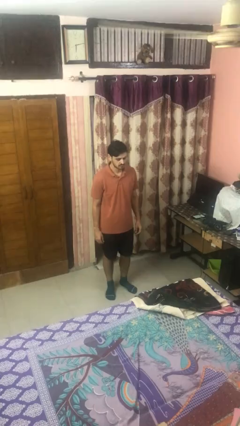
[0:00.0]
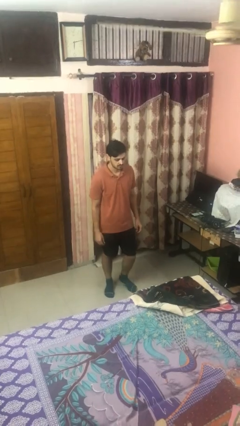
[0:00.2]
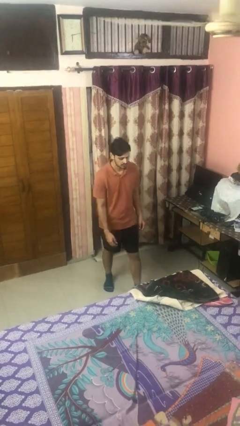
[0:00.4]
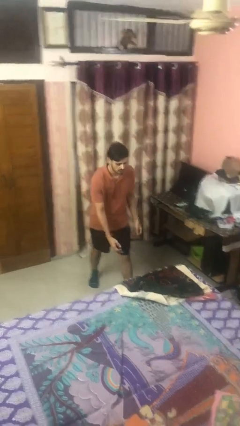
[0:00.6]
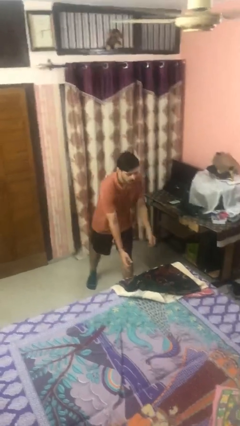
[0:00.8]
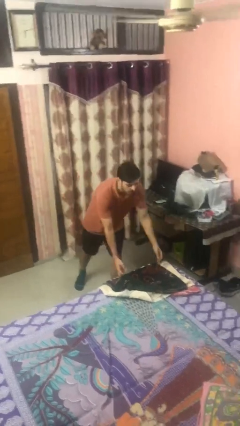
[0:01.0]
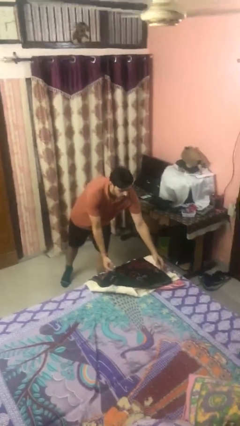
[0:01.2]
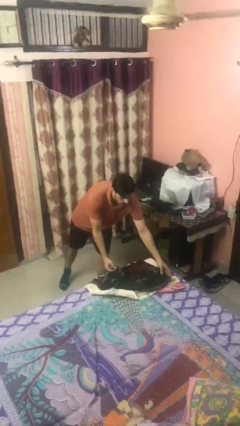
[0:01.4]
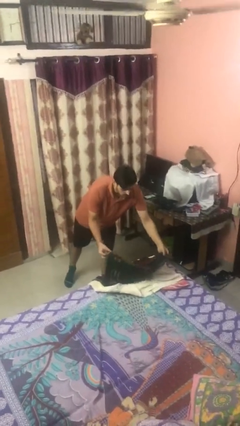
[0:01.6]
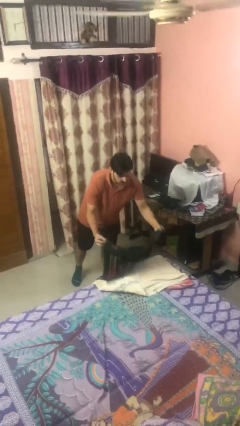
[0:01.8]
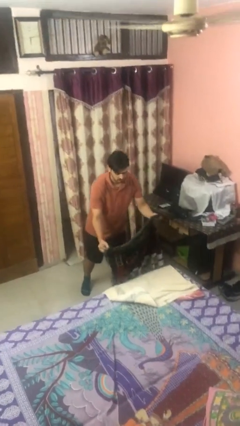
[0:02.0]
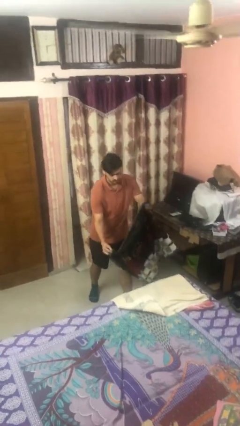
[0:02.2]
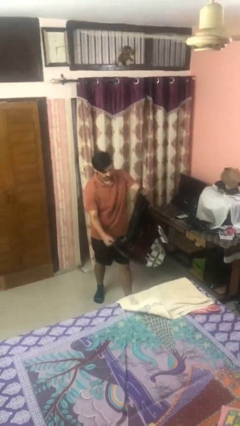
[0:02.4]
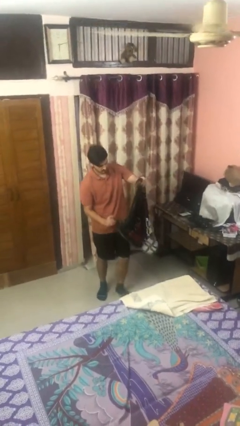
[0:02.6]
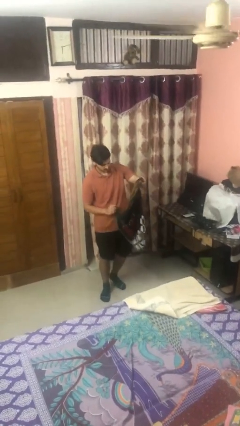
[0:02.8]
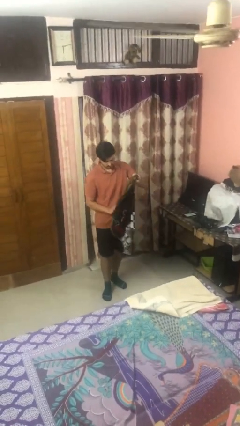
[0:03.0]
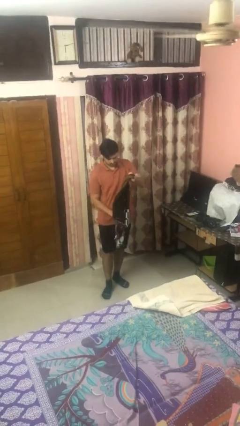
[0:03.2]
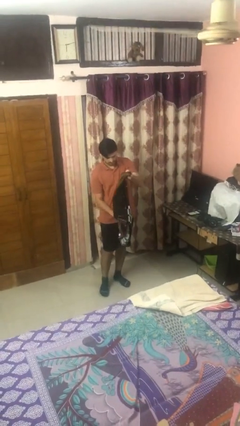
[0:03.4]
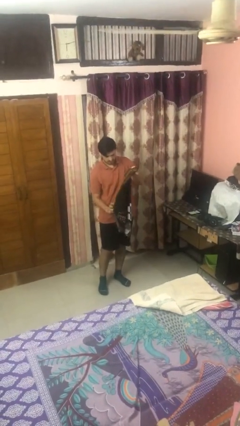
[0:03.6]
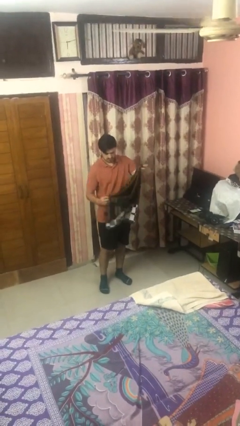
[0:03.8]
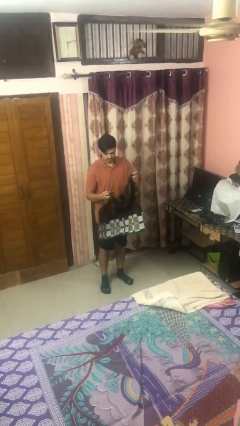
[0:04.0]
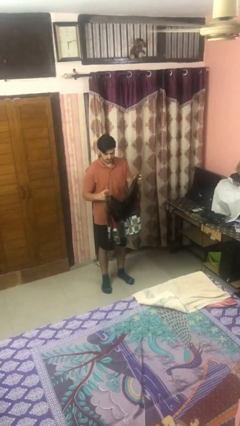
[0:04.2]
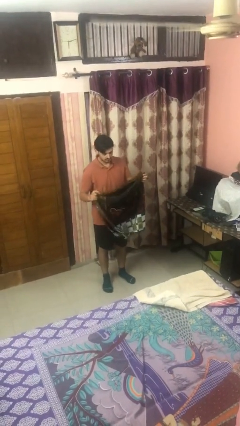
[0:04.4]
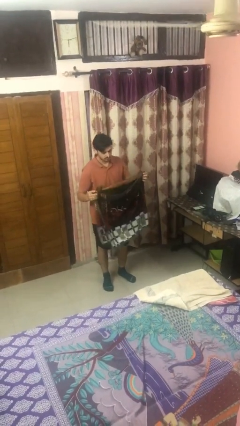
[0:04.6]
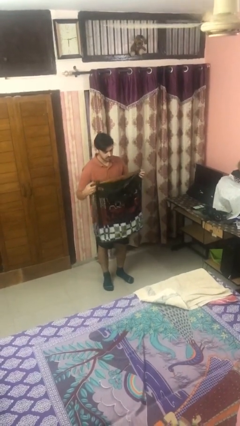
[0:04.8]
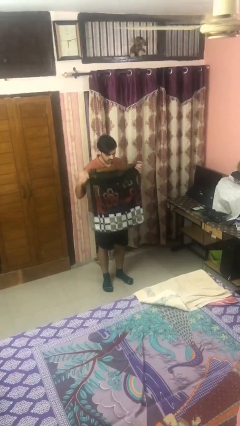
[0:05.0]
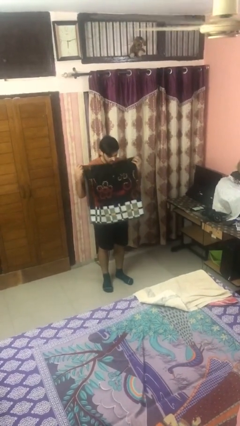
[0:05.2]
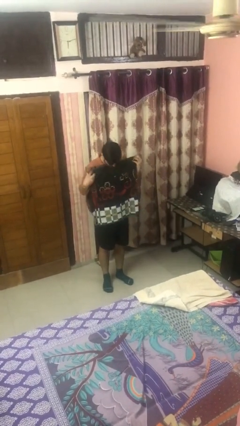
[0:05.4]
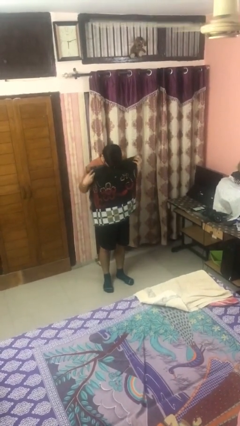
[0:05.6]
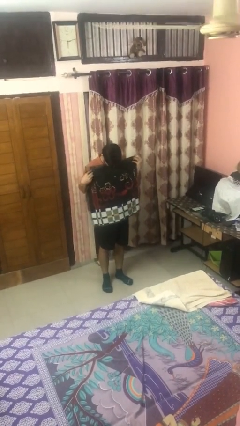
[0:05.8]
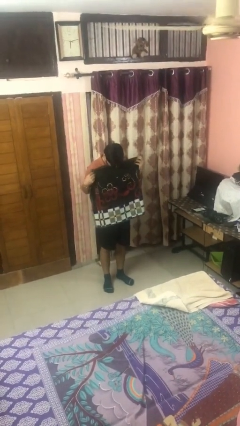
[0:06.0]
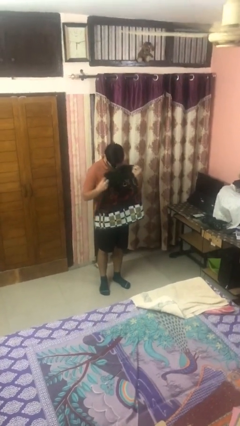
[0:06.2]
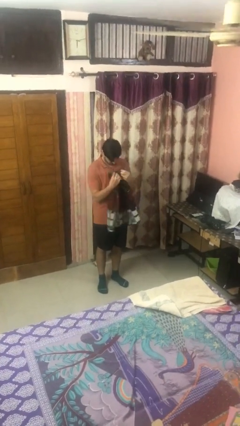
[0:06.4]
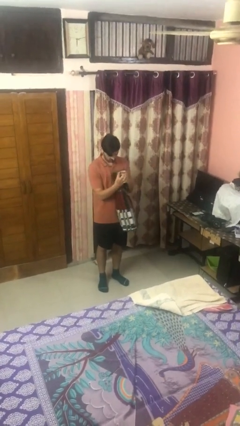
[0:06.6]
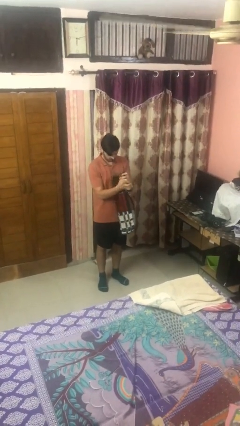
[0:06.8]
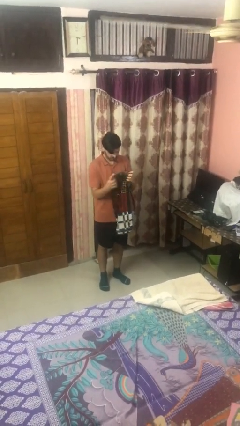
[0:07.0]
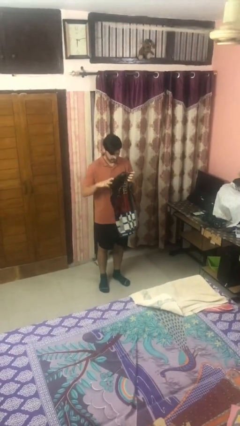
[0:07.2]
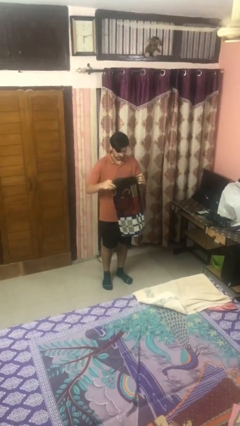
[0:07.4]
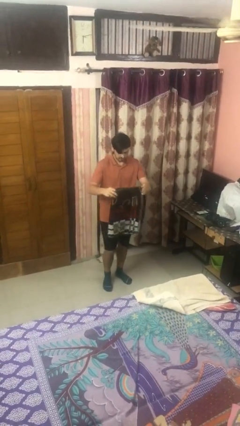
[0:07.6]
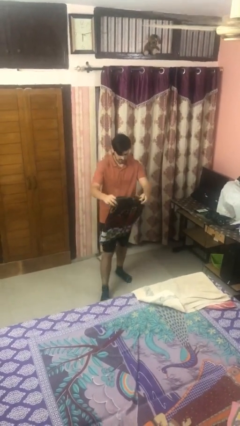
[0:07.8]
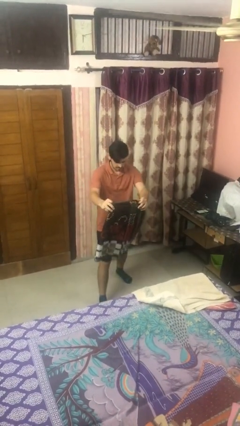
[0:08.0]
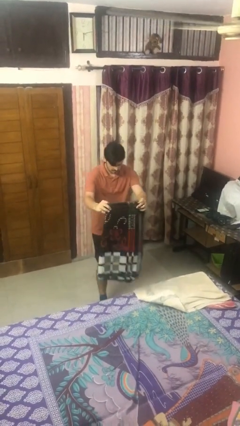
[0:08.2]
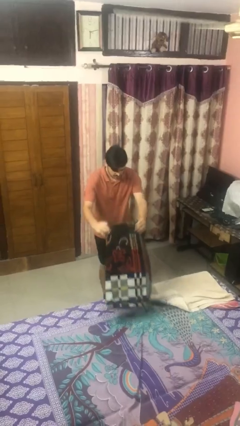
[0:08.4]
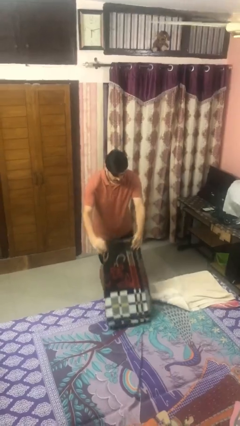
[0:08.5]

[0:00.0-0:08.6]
person folds towel

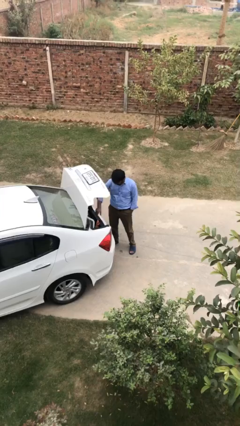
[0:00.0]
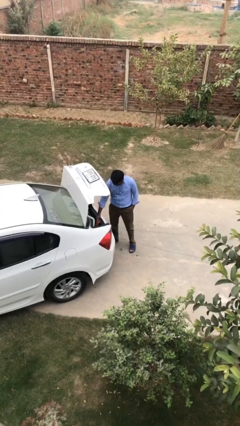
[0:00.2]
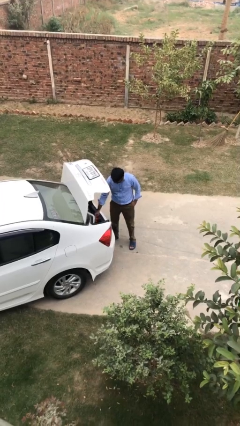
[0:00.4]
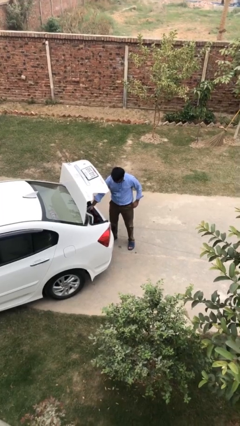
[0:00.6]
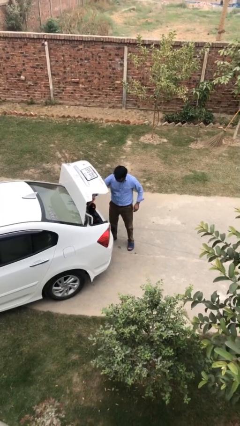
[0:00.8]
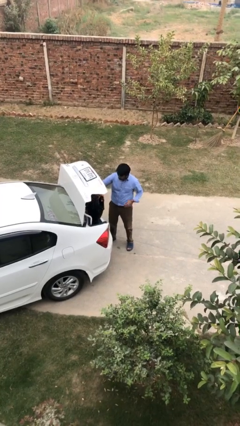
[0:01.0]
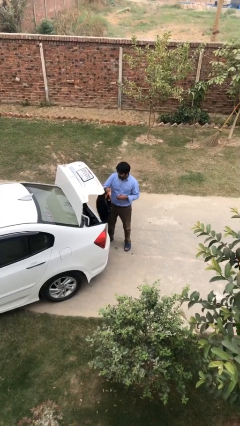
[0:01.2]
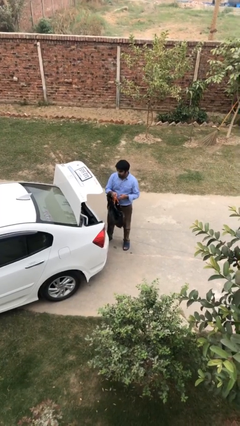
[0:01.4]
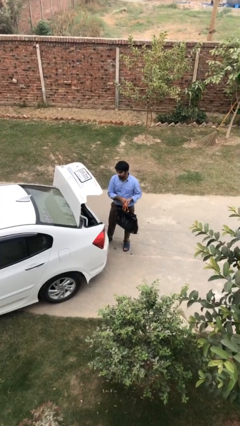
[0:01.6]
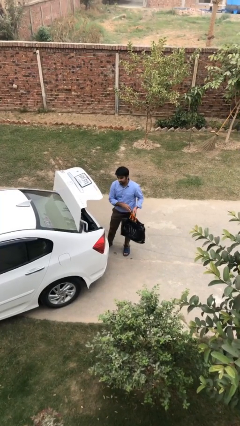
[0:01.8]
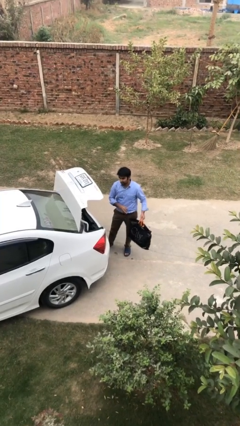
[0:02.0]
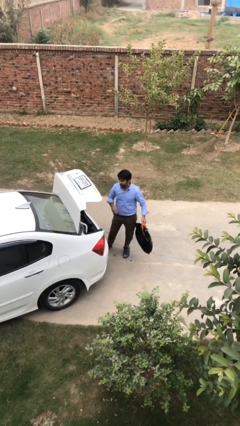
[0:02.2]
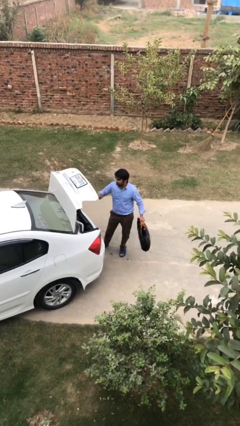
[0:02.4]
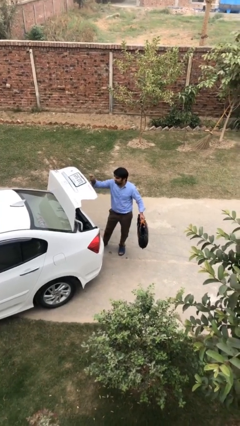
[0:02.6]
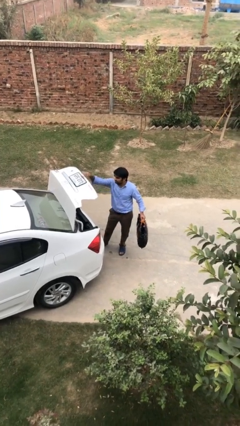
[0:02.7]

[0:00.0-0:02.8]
person unloads car

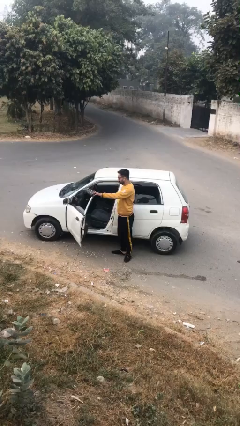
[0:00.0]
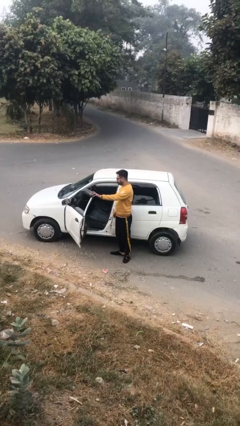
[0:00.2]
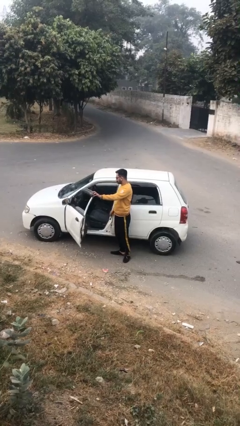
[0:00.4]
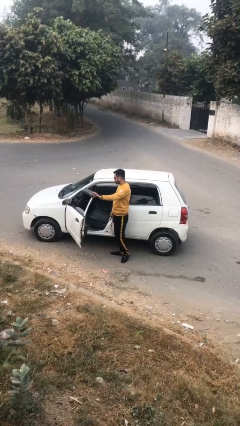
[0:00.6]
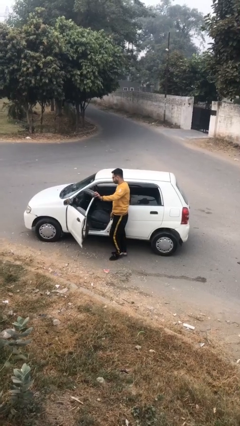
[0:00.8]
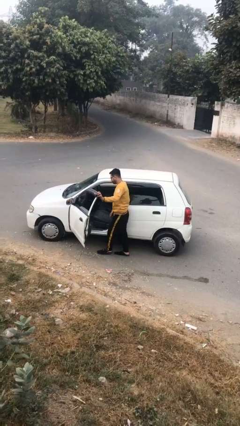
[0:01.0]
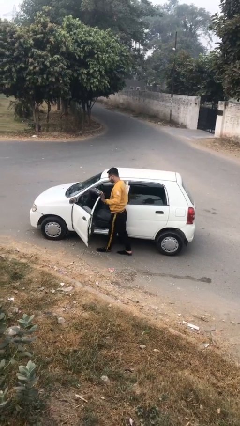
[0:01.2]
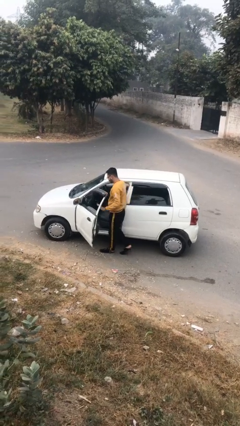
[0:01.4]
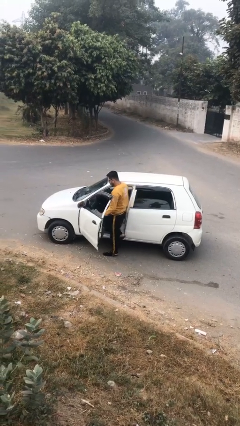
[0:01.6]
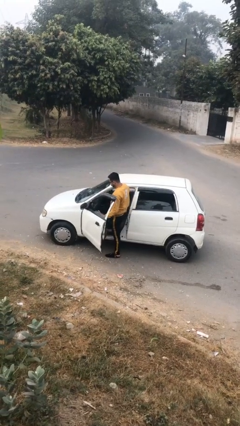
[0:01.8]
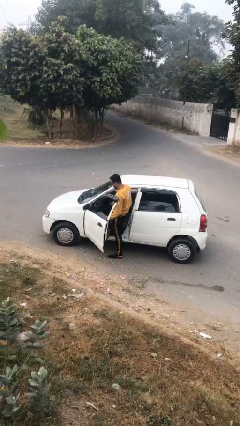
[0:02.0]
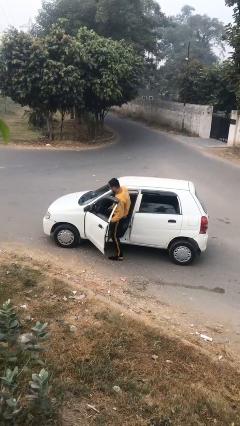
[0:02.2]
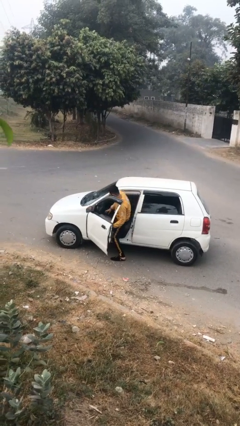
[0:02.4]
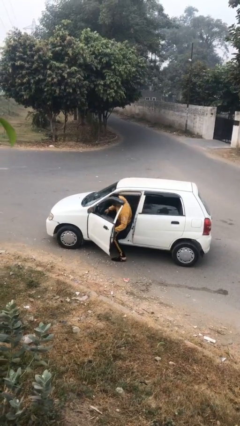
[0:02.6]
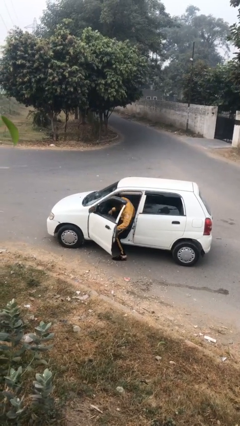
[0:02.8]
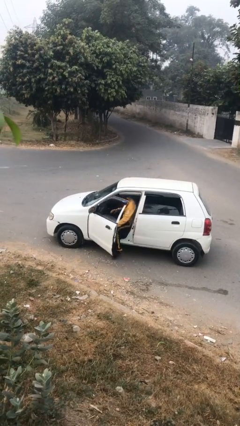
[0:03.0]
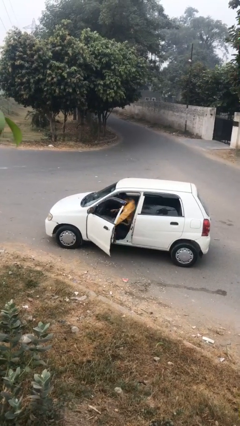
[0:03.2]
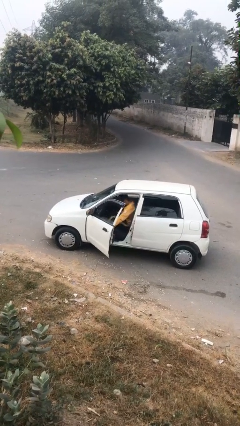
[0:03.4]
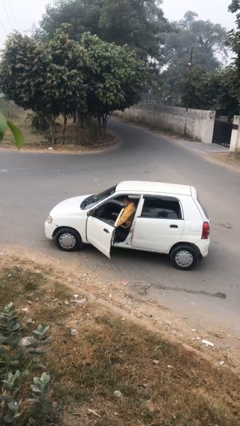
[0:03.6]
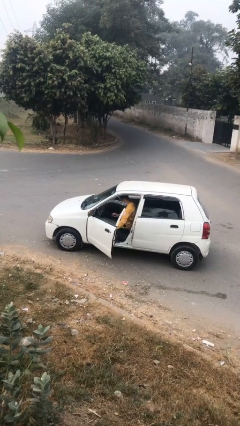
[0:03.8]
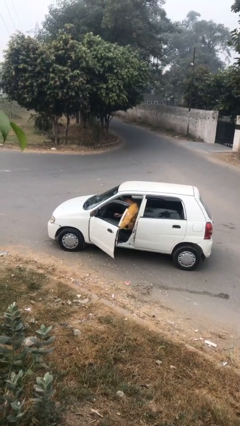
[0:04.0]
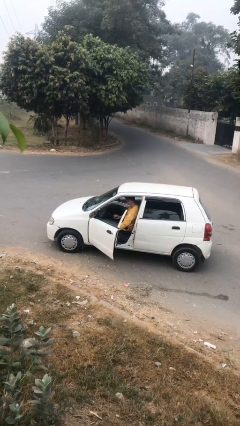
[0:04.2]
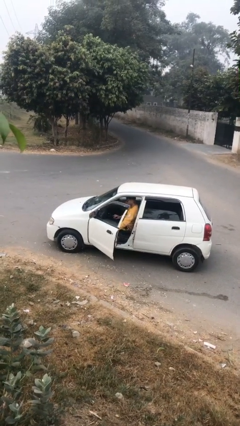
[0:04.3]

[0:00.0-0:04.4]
person enters car

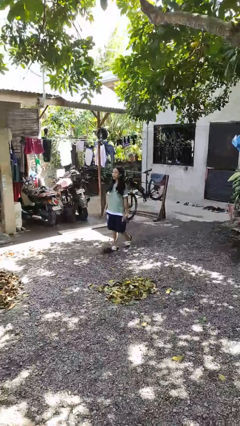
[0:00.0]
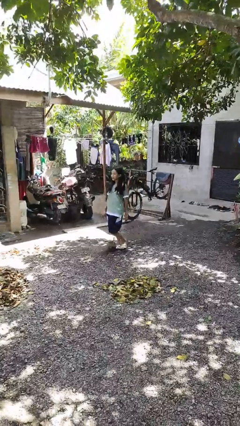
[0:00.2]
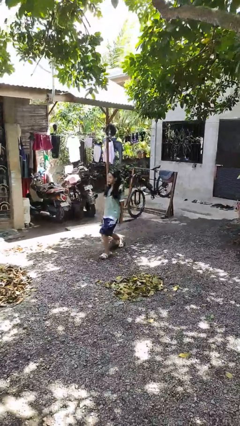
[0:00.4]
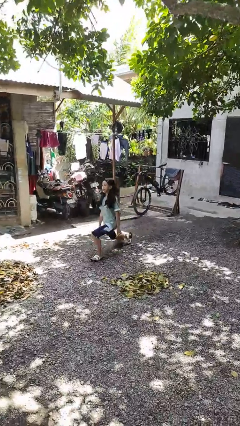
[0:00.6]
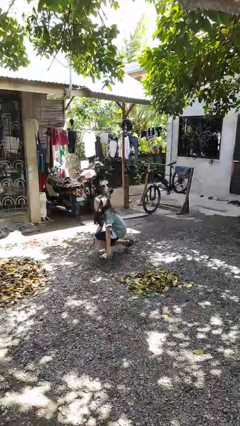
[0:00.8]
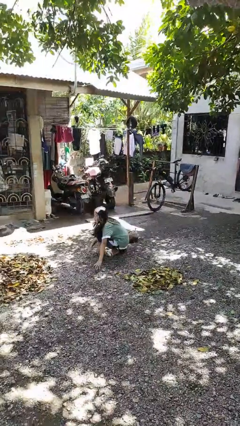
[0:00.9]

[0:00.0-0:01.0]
person trips on object on floor

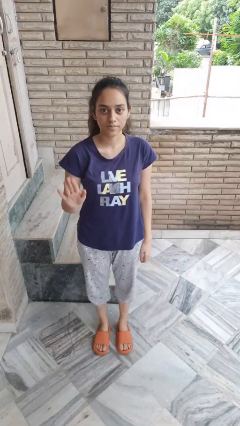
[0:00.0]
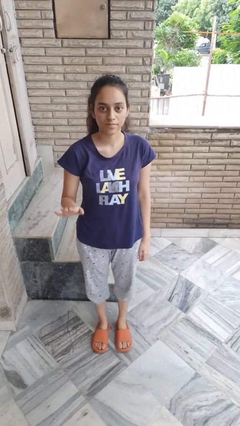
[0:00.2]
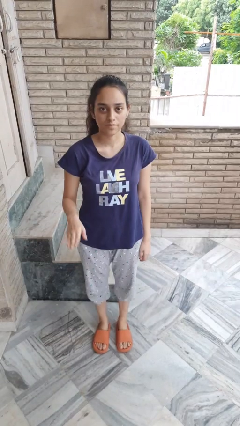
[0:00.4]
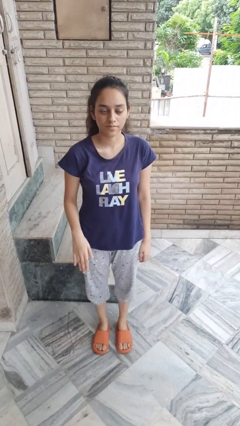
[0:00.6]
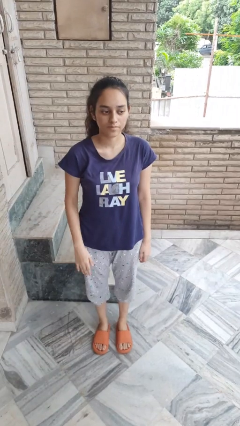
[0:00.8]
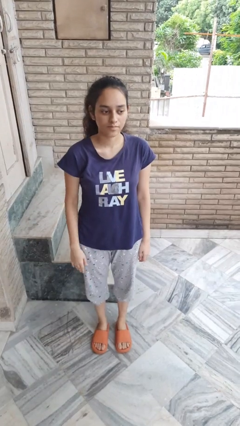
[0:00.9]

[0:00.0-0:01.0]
person gestures stop

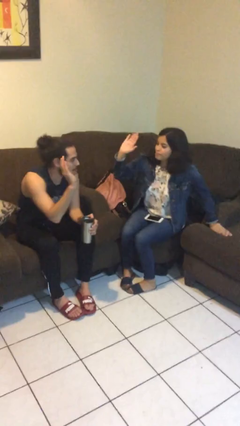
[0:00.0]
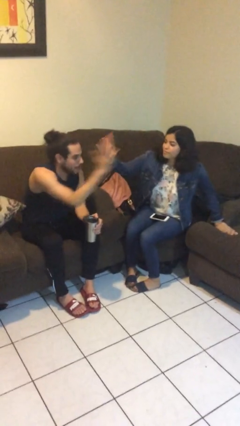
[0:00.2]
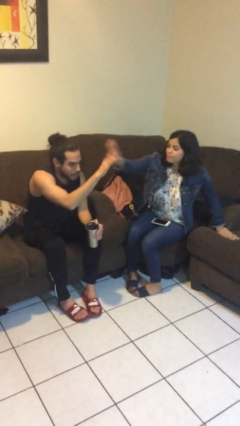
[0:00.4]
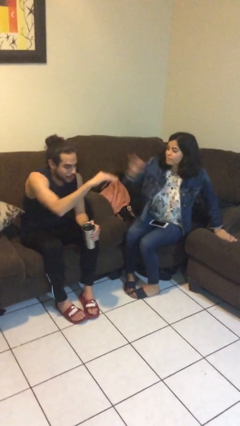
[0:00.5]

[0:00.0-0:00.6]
person highfives hand
